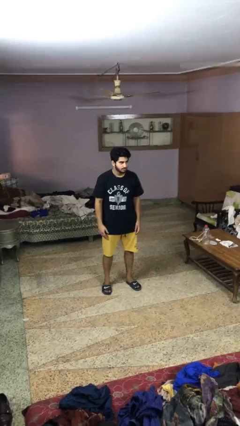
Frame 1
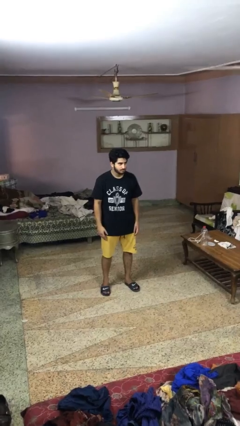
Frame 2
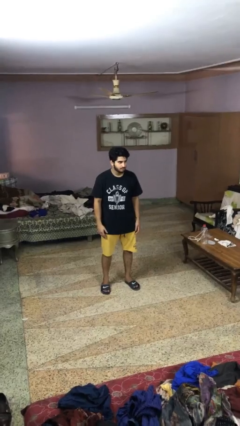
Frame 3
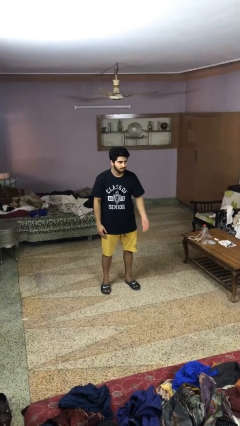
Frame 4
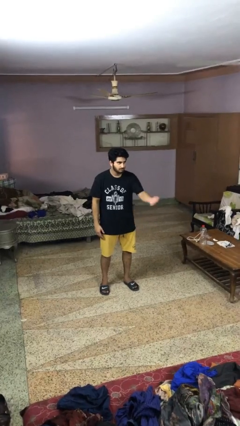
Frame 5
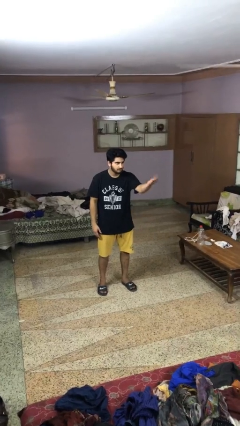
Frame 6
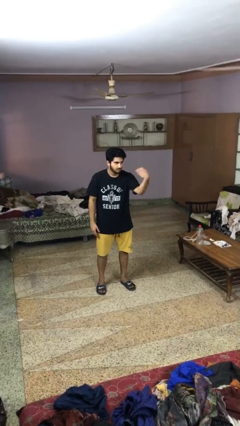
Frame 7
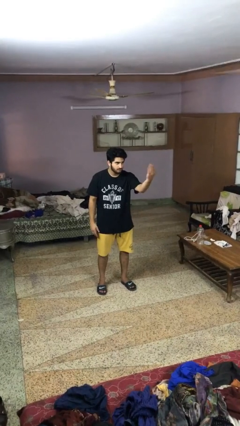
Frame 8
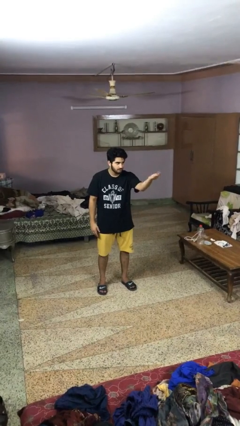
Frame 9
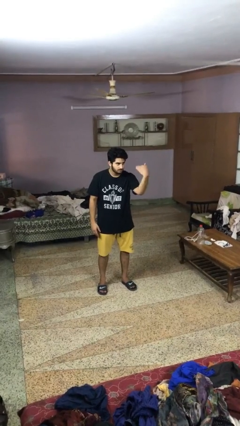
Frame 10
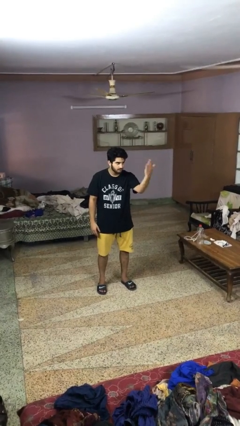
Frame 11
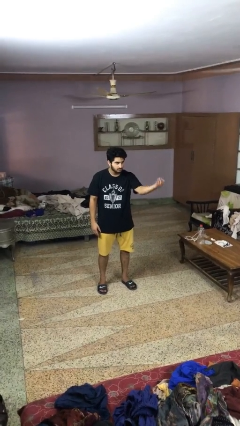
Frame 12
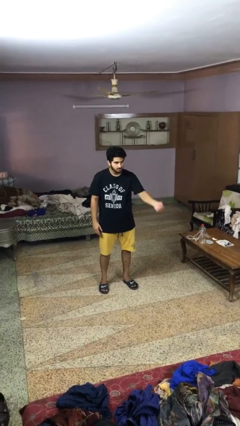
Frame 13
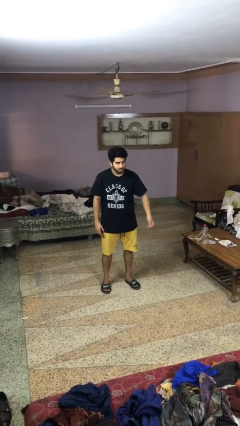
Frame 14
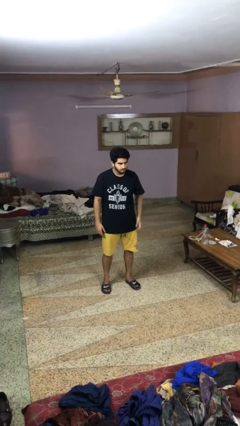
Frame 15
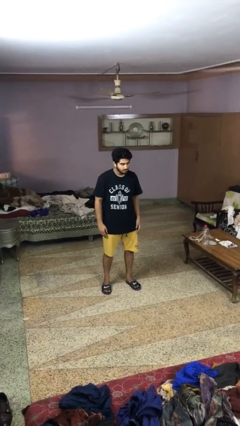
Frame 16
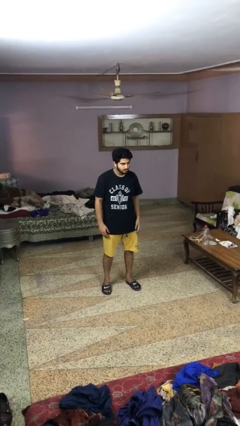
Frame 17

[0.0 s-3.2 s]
person gestures come here

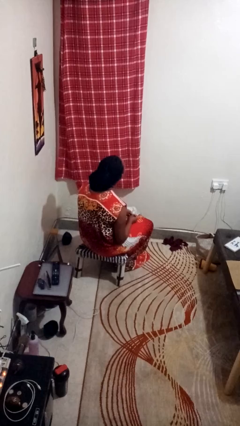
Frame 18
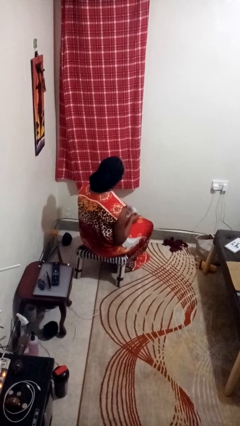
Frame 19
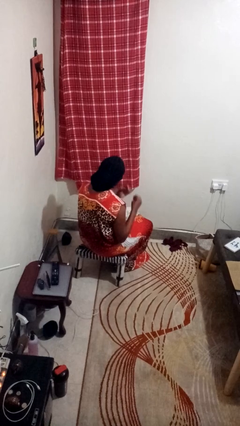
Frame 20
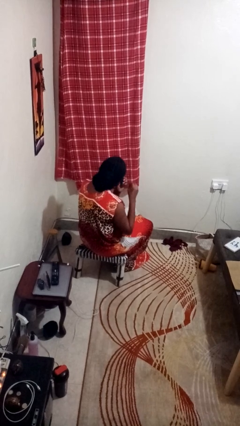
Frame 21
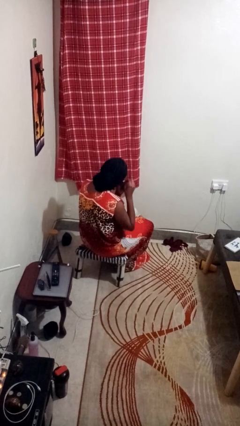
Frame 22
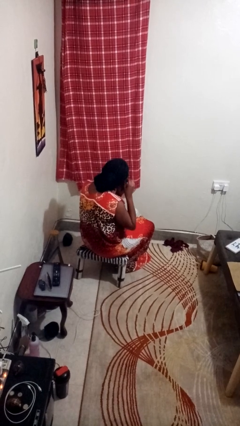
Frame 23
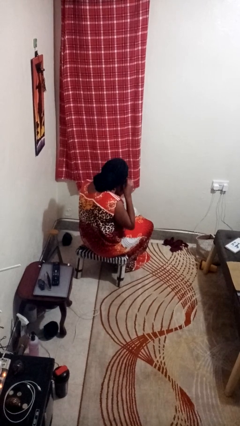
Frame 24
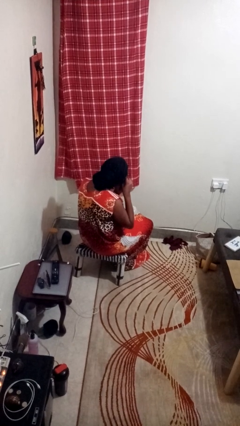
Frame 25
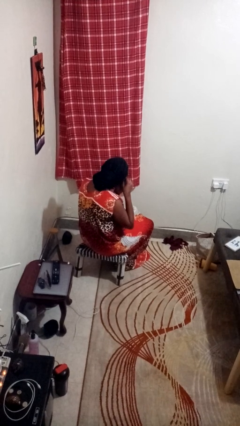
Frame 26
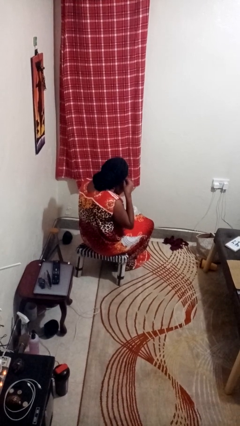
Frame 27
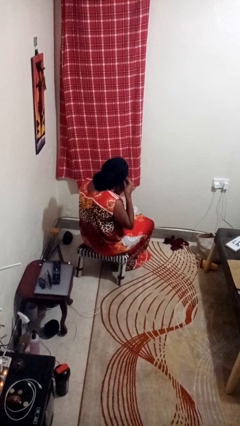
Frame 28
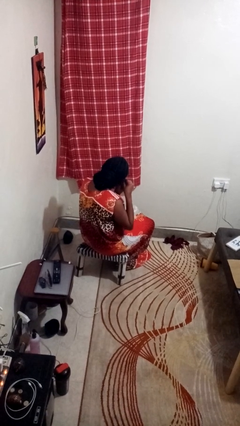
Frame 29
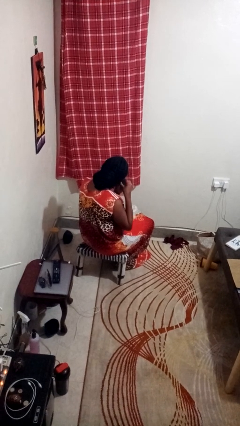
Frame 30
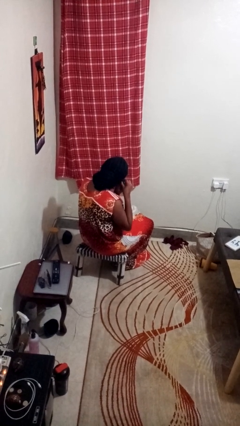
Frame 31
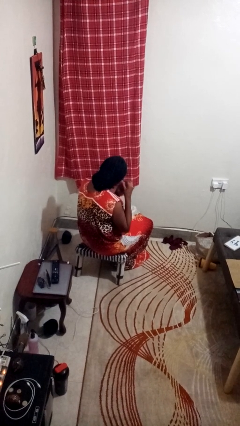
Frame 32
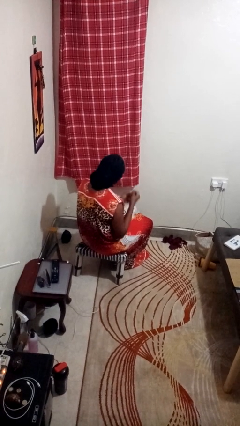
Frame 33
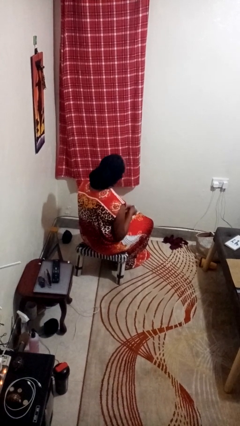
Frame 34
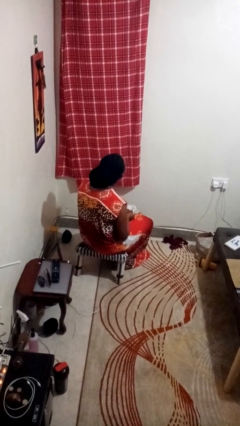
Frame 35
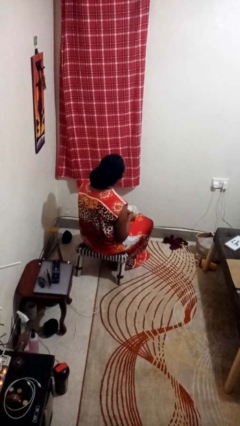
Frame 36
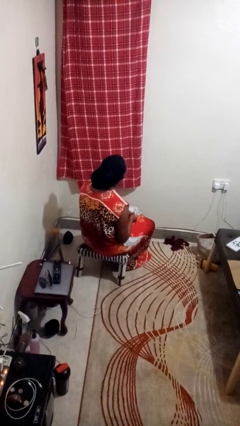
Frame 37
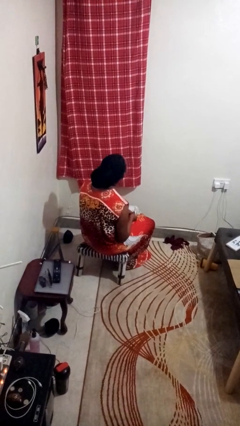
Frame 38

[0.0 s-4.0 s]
person puts on earrings

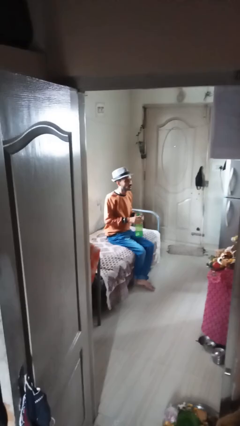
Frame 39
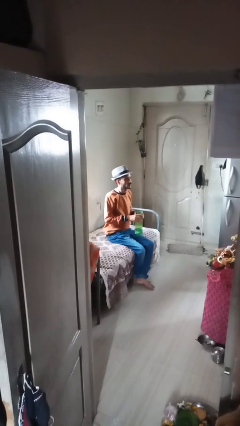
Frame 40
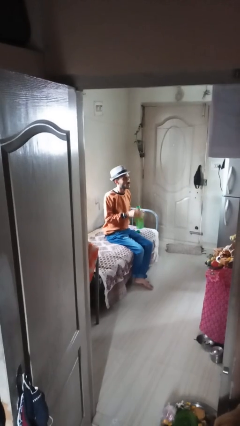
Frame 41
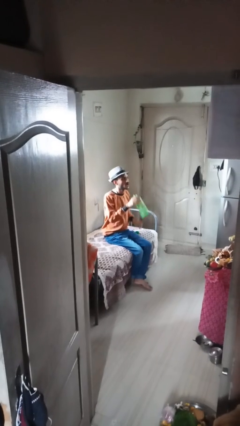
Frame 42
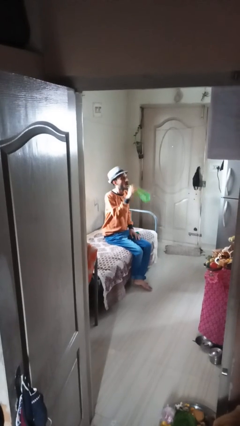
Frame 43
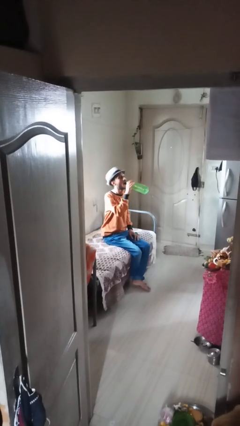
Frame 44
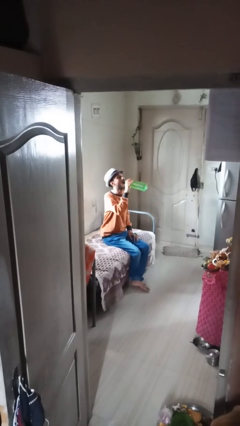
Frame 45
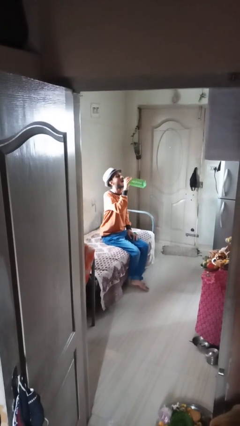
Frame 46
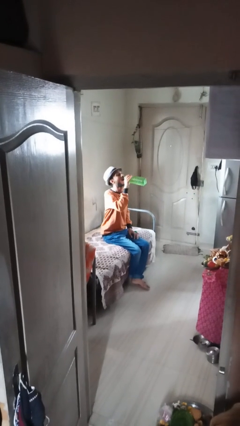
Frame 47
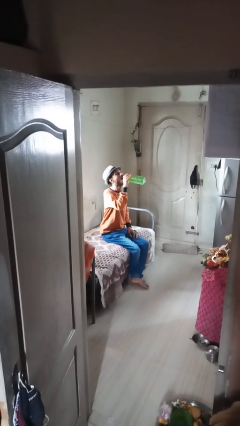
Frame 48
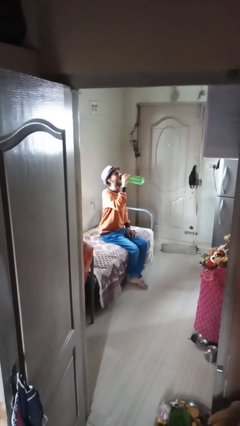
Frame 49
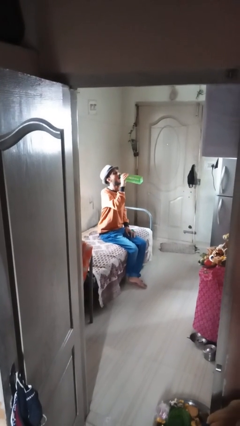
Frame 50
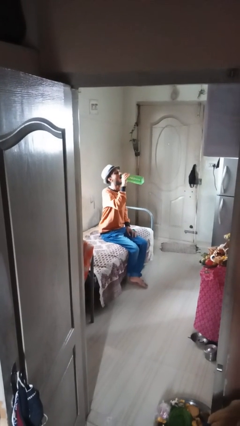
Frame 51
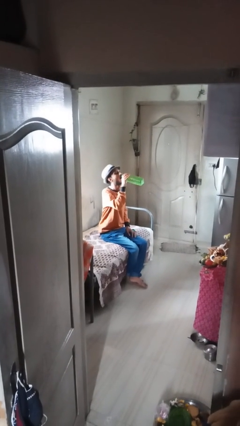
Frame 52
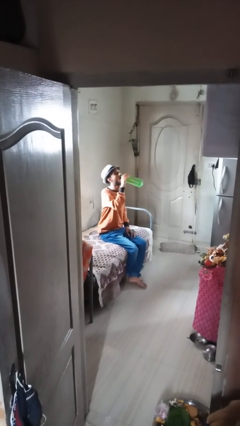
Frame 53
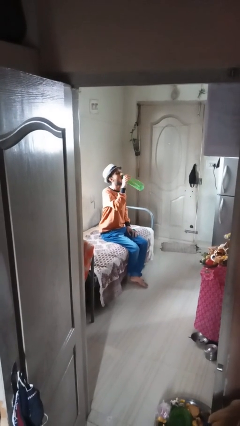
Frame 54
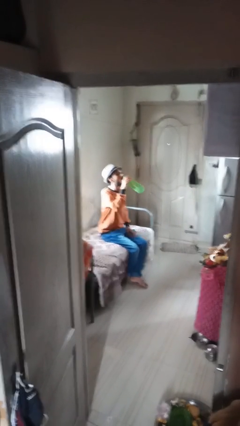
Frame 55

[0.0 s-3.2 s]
person drinks from bottle

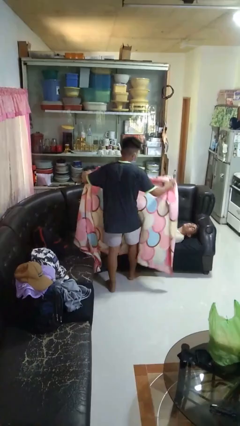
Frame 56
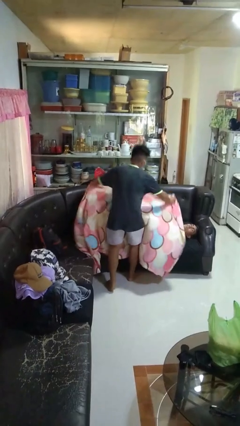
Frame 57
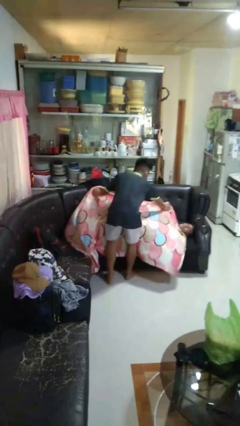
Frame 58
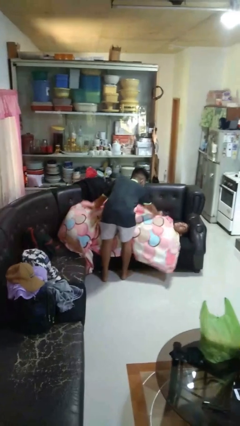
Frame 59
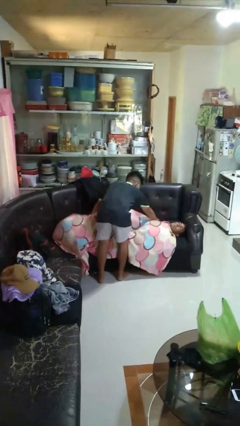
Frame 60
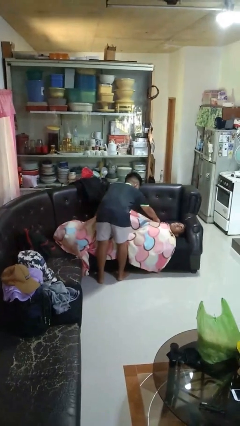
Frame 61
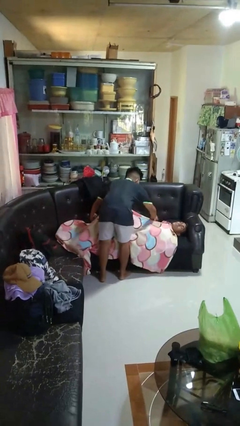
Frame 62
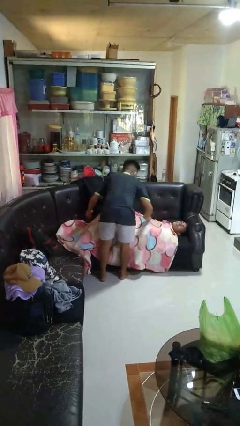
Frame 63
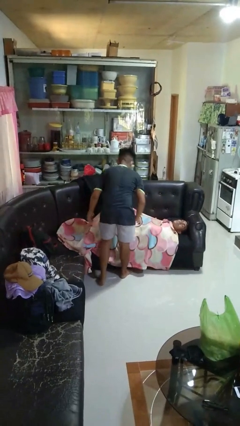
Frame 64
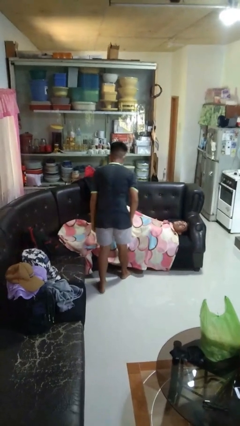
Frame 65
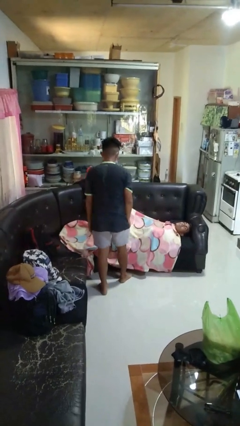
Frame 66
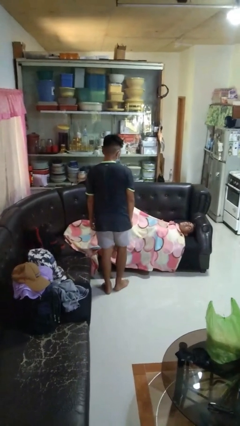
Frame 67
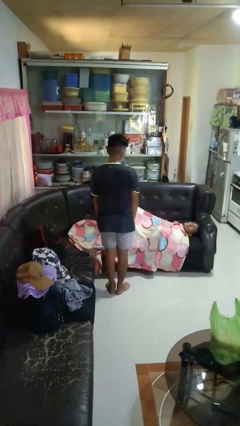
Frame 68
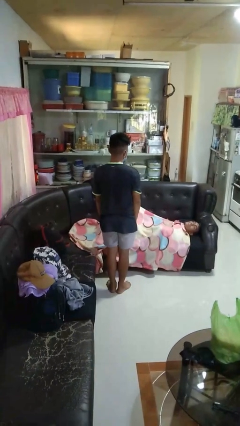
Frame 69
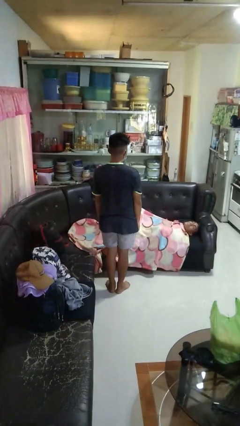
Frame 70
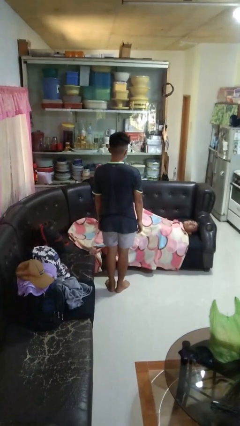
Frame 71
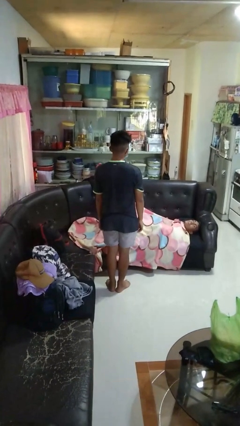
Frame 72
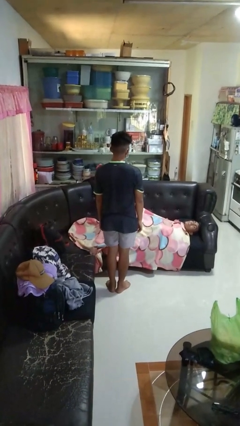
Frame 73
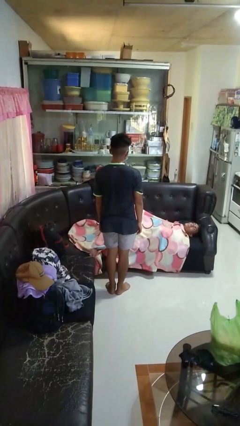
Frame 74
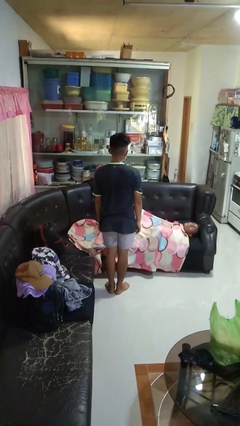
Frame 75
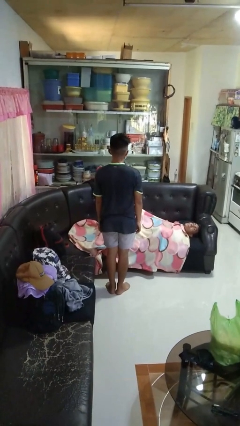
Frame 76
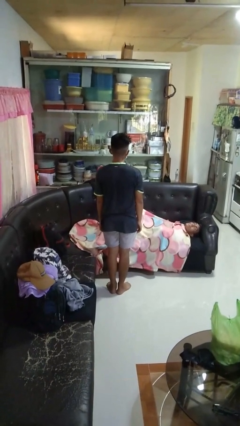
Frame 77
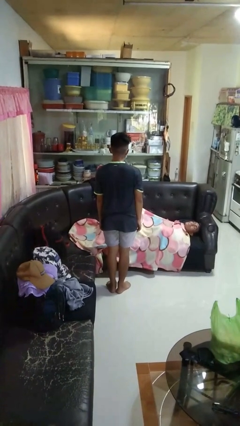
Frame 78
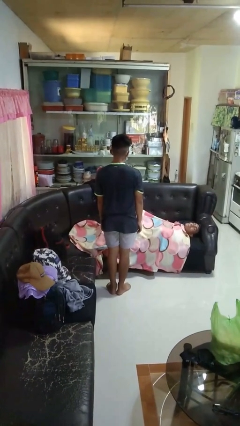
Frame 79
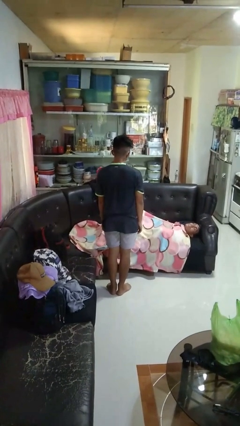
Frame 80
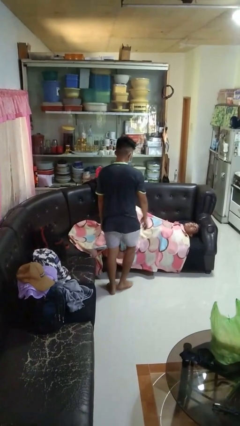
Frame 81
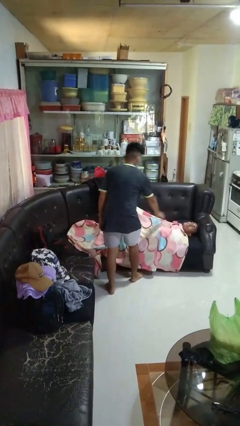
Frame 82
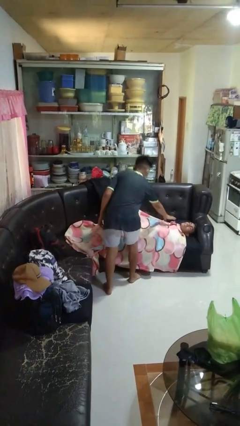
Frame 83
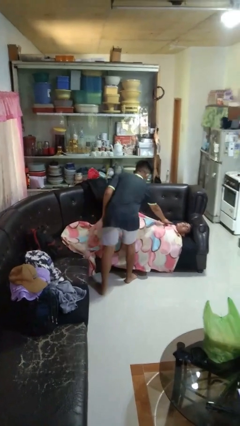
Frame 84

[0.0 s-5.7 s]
person covers friend with blanket

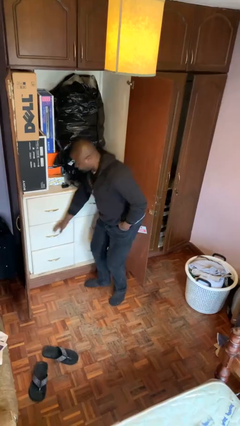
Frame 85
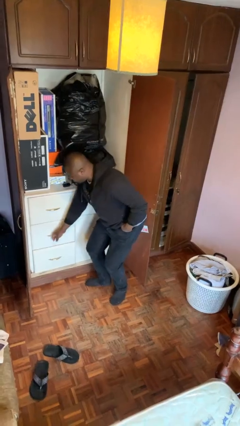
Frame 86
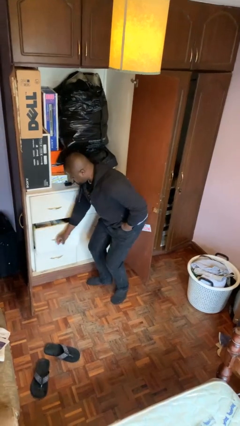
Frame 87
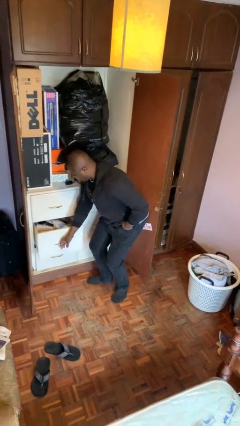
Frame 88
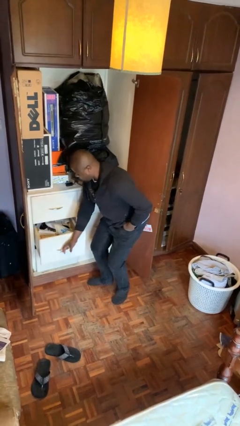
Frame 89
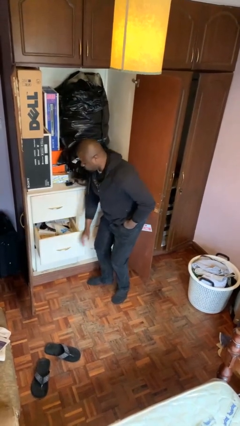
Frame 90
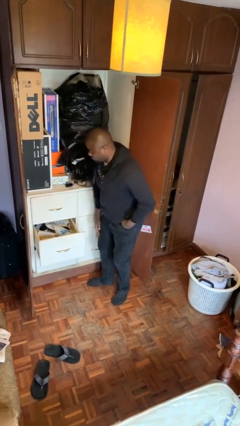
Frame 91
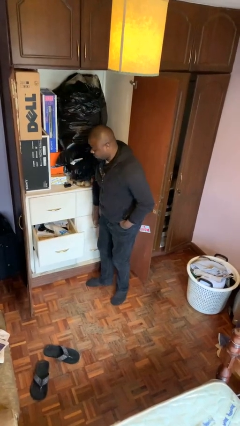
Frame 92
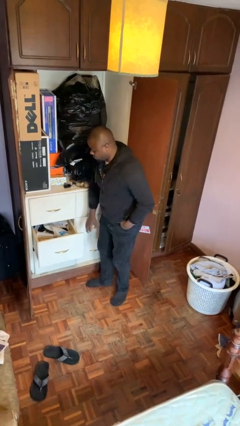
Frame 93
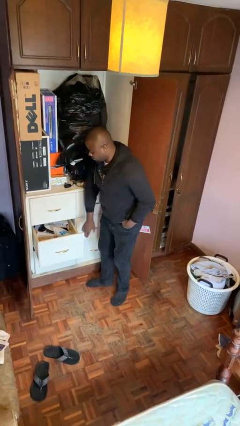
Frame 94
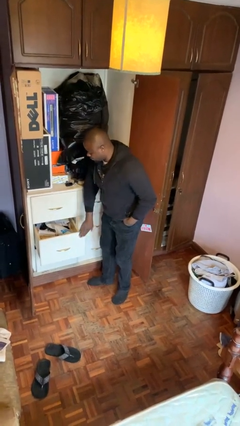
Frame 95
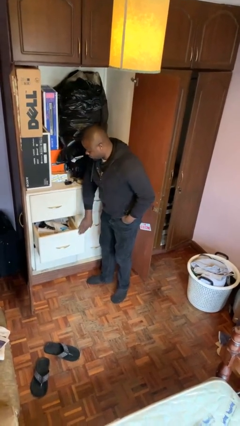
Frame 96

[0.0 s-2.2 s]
person opens dresser drawer
